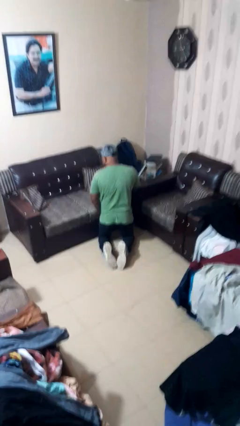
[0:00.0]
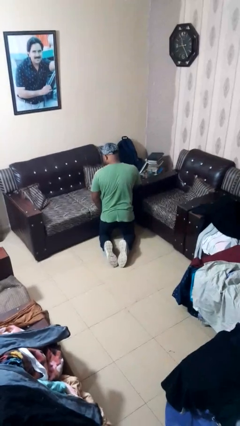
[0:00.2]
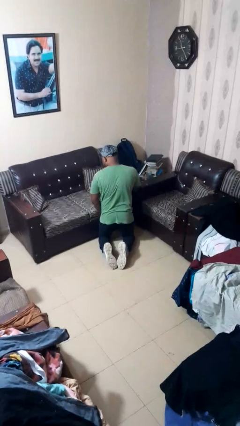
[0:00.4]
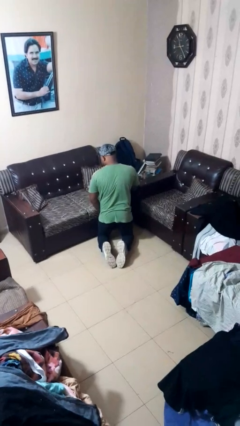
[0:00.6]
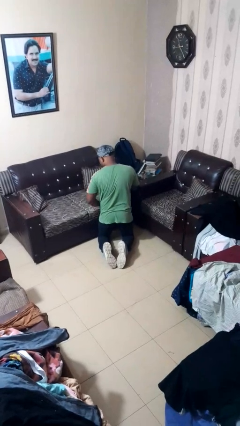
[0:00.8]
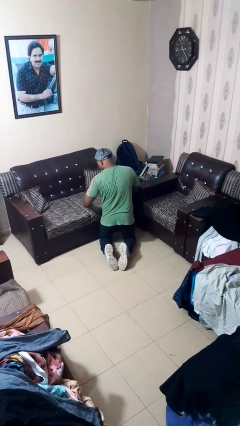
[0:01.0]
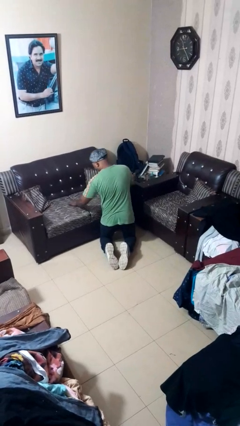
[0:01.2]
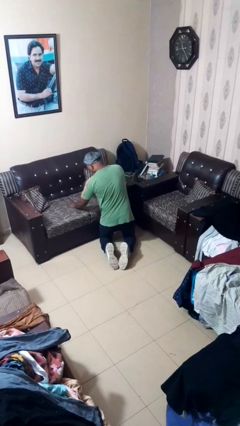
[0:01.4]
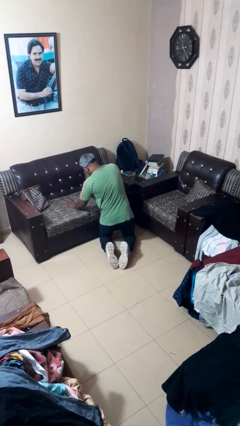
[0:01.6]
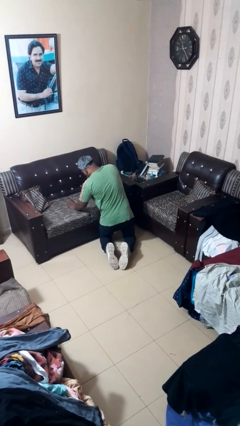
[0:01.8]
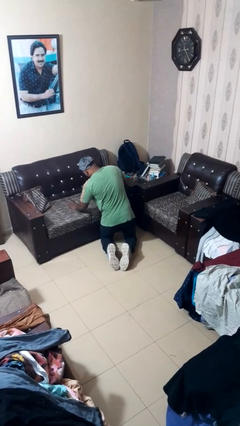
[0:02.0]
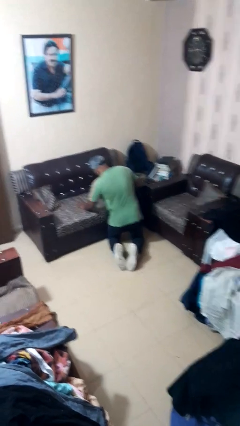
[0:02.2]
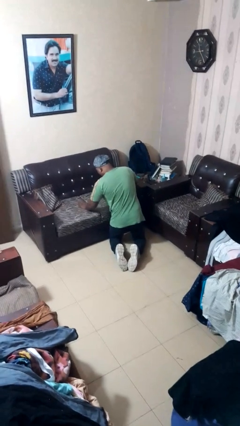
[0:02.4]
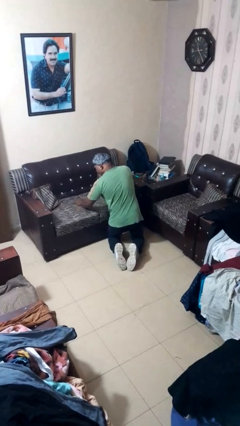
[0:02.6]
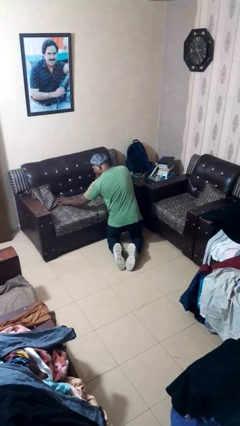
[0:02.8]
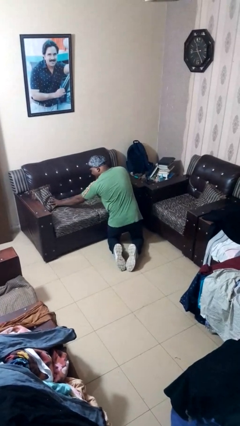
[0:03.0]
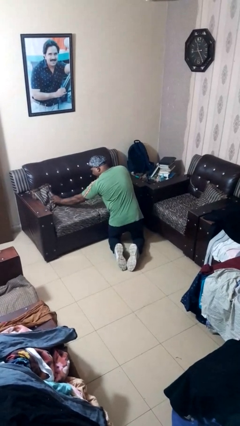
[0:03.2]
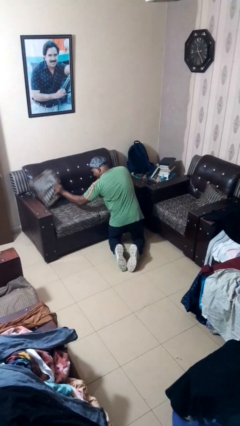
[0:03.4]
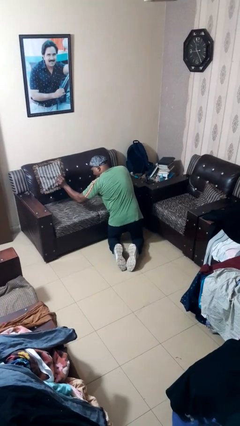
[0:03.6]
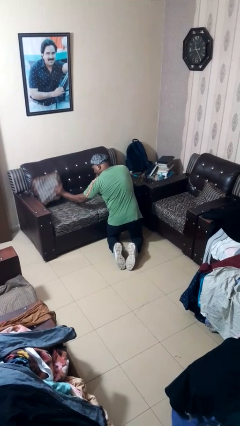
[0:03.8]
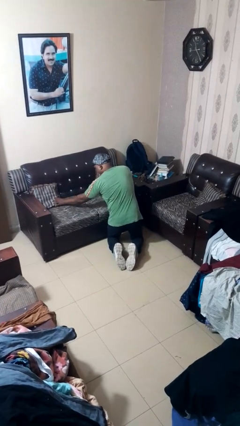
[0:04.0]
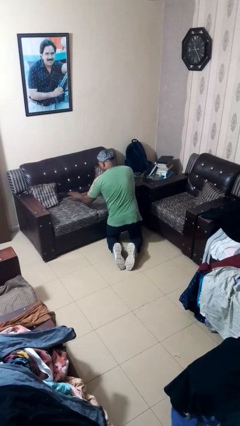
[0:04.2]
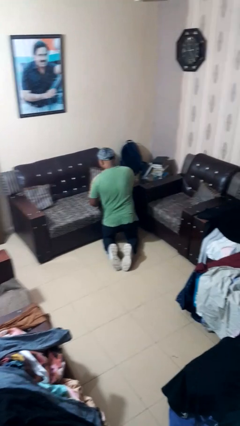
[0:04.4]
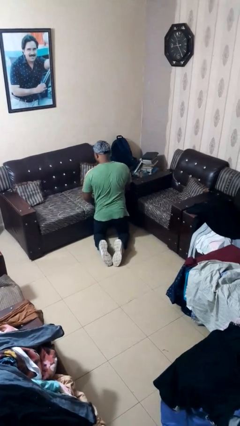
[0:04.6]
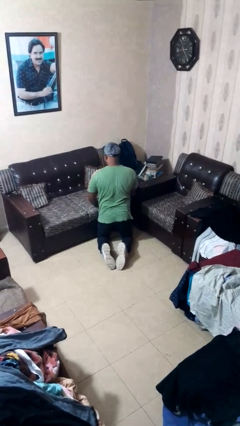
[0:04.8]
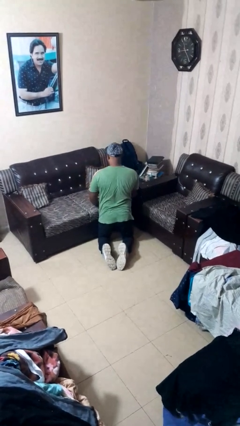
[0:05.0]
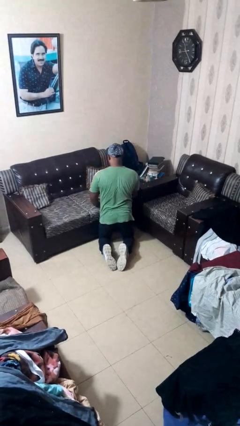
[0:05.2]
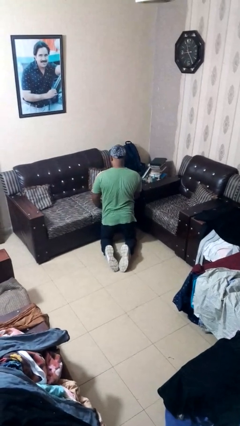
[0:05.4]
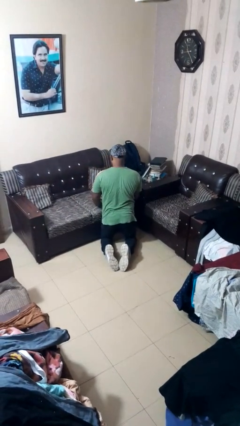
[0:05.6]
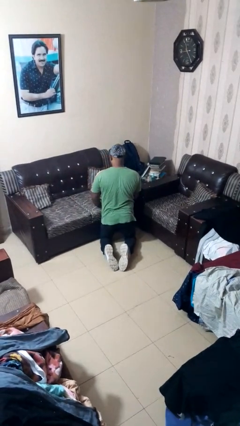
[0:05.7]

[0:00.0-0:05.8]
person searches in couch

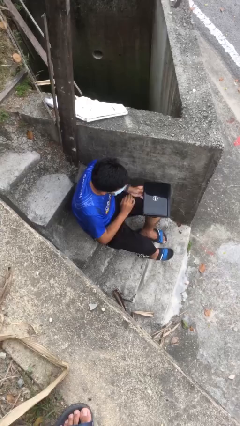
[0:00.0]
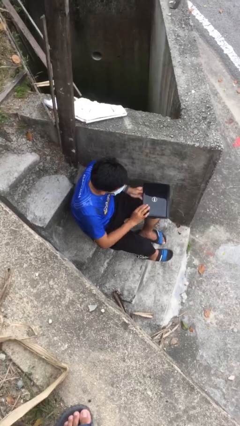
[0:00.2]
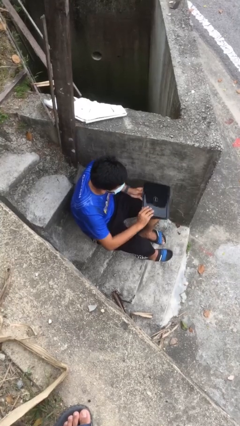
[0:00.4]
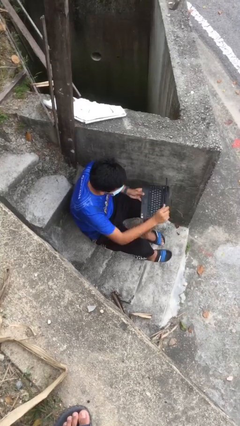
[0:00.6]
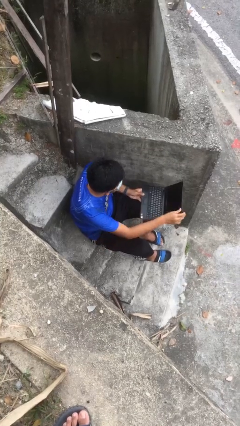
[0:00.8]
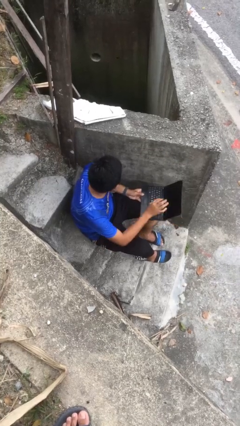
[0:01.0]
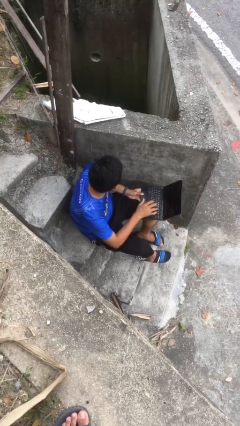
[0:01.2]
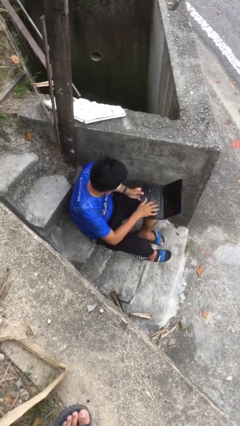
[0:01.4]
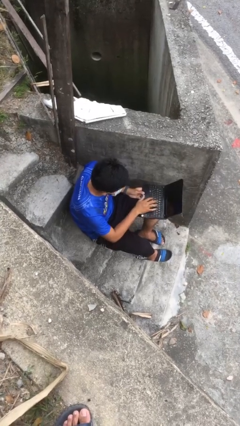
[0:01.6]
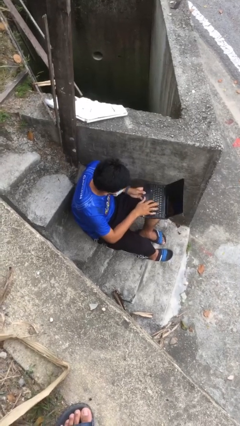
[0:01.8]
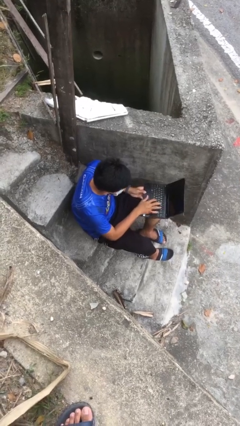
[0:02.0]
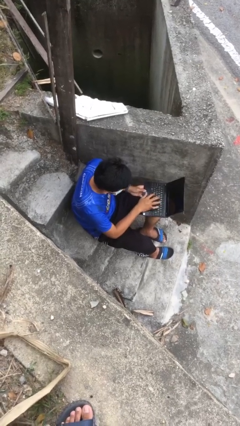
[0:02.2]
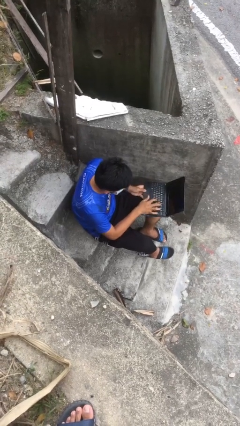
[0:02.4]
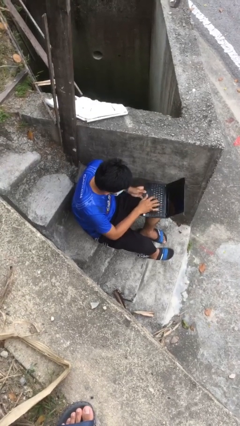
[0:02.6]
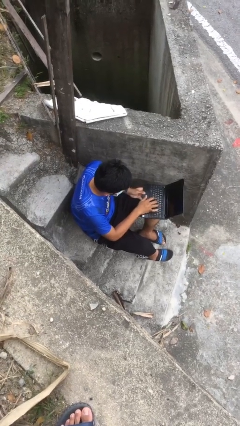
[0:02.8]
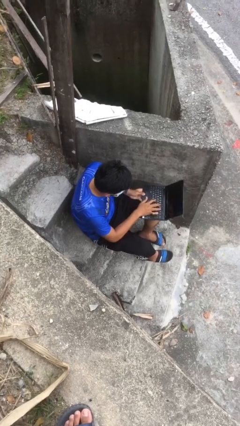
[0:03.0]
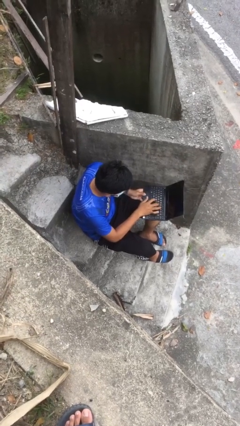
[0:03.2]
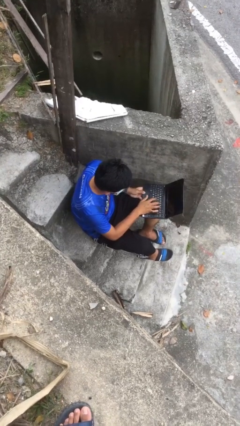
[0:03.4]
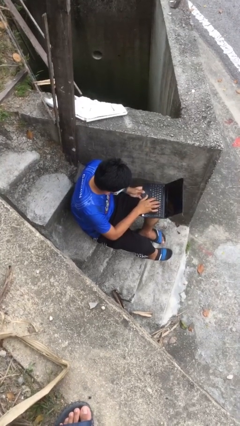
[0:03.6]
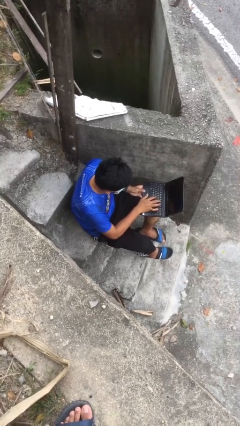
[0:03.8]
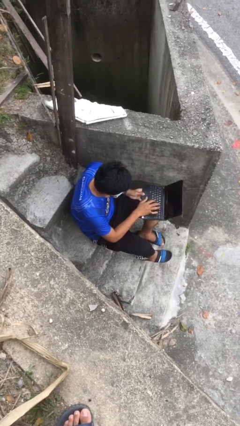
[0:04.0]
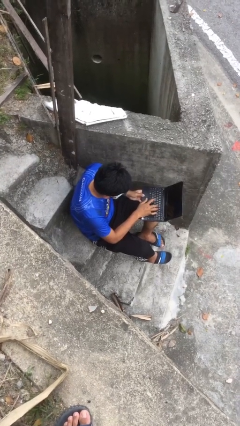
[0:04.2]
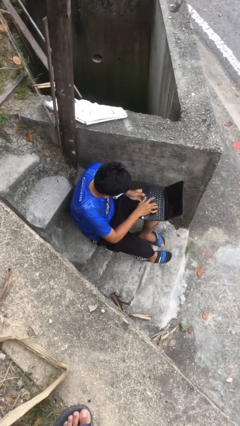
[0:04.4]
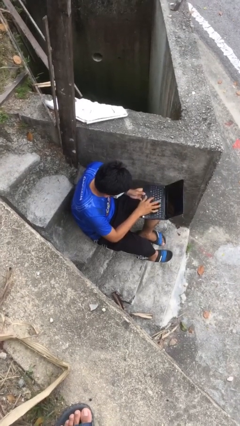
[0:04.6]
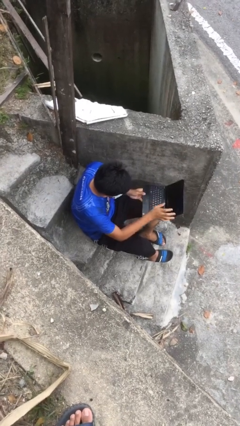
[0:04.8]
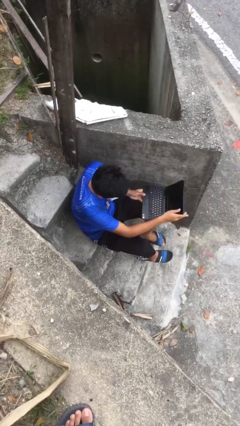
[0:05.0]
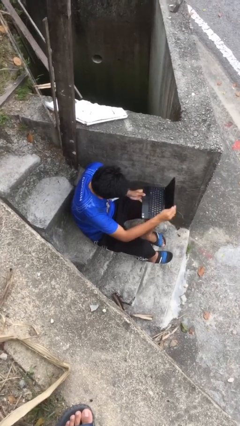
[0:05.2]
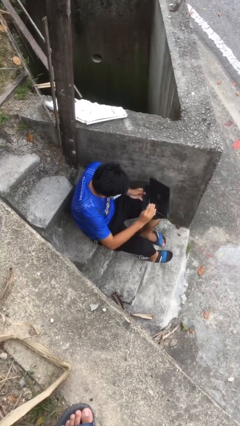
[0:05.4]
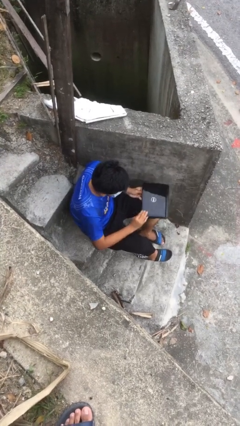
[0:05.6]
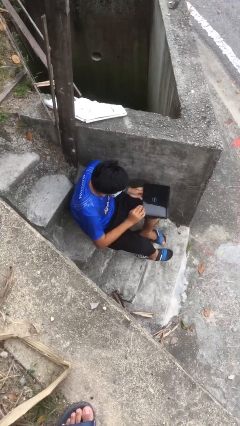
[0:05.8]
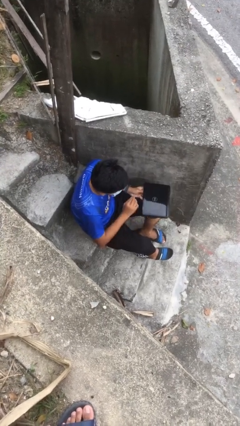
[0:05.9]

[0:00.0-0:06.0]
person interacts with laptop

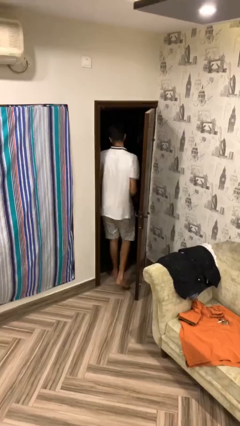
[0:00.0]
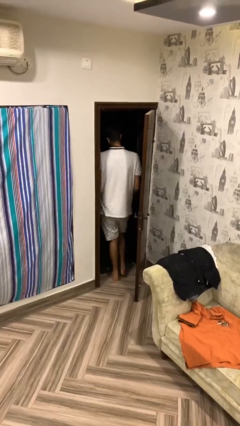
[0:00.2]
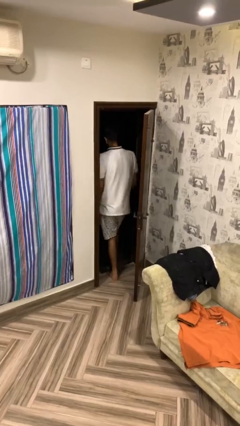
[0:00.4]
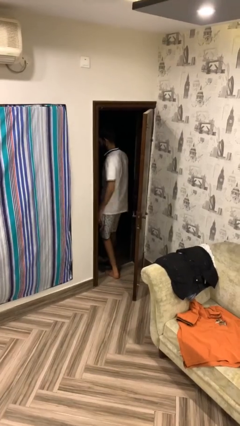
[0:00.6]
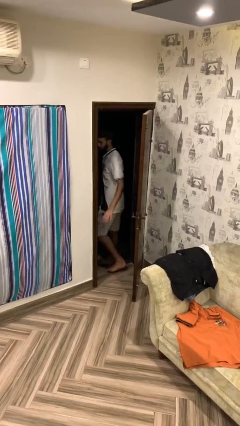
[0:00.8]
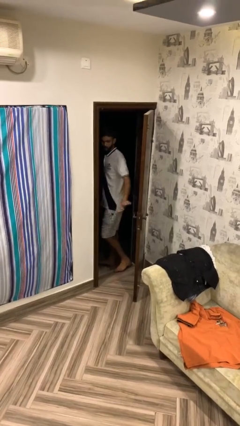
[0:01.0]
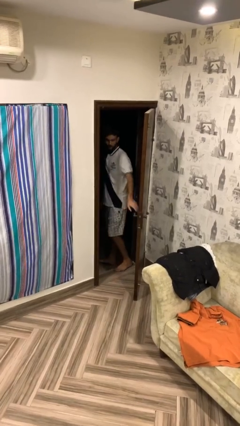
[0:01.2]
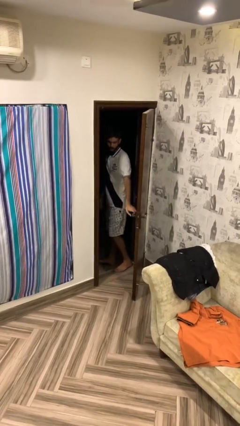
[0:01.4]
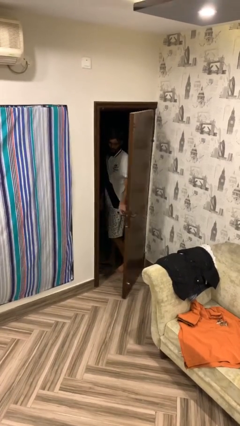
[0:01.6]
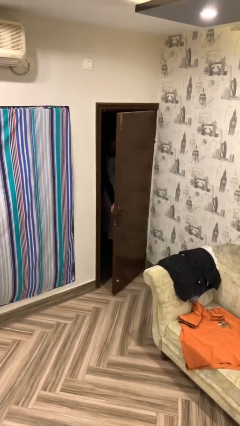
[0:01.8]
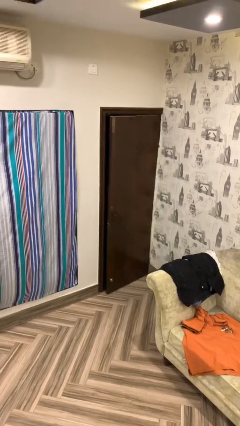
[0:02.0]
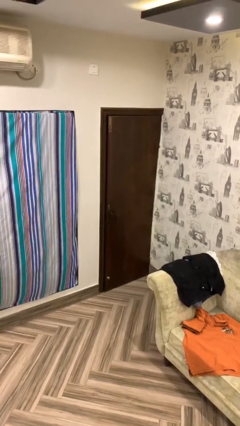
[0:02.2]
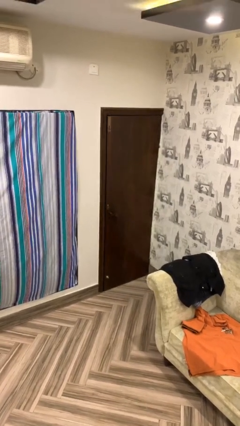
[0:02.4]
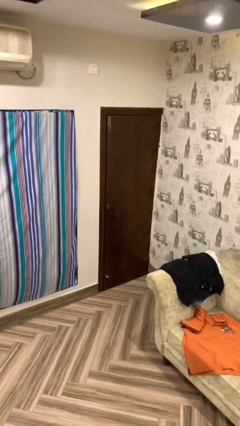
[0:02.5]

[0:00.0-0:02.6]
person closes facility door

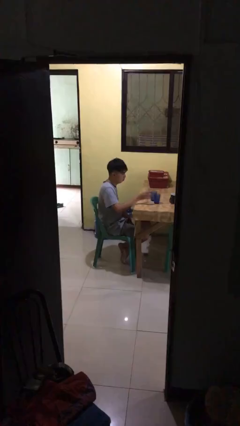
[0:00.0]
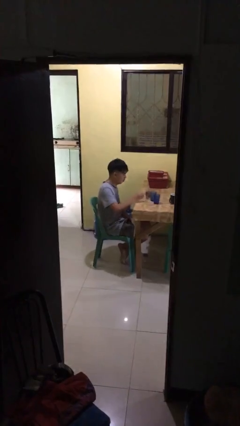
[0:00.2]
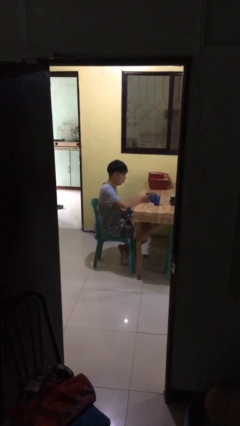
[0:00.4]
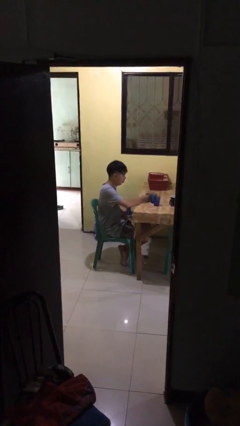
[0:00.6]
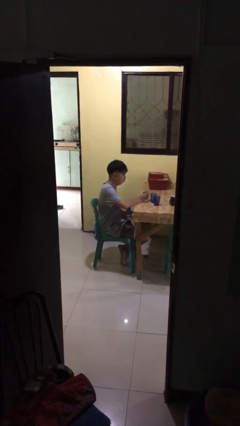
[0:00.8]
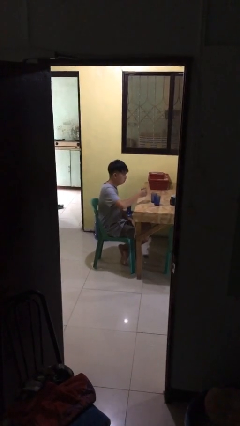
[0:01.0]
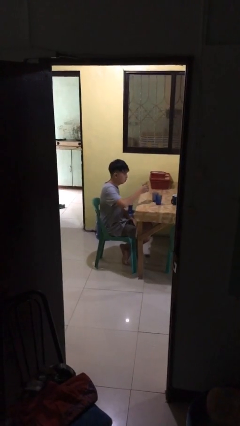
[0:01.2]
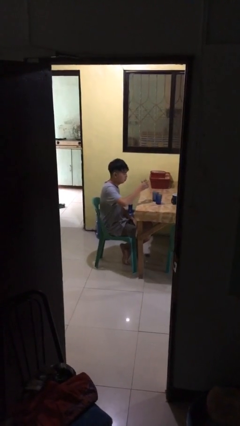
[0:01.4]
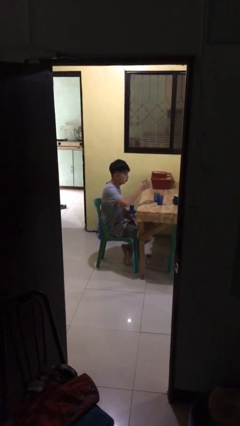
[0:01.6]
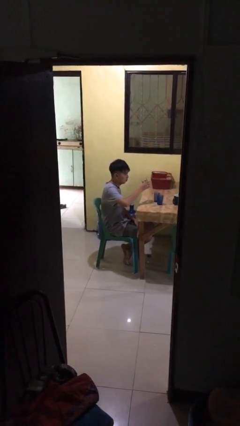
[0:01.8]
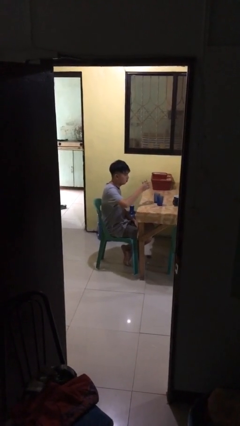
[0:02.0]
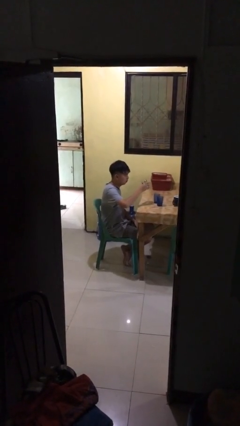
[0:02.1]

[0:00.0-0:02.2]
person picks up object from table

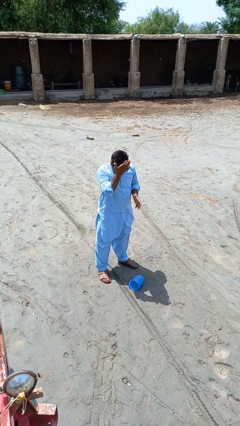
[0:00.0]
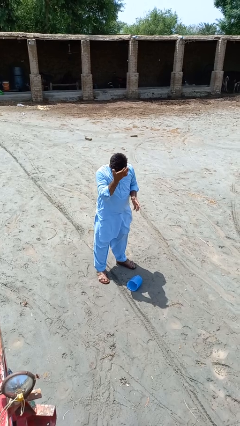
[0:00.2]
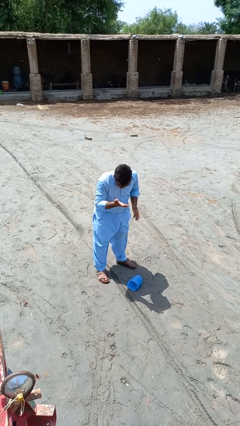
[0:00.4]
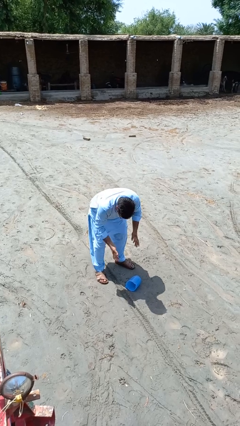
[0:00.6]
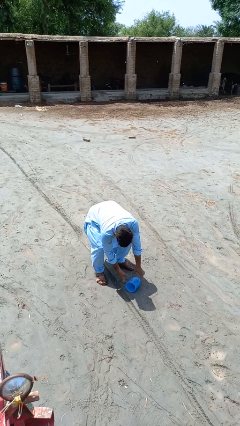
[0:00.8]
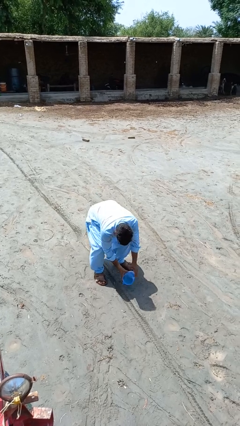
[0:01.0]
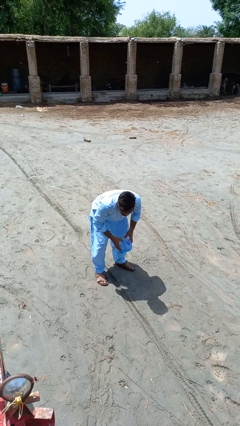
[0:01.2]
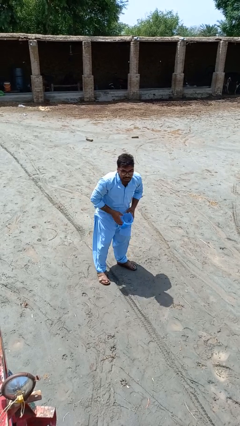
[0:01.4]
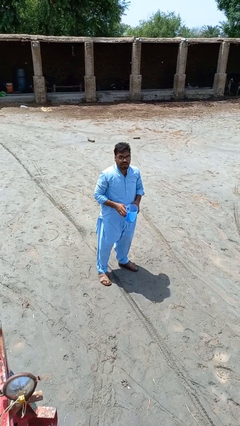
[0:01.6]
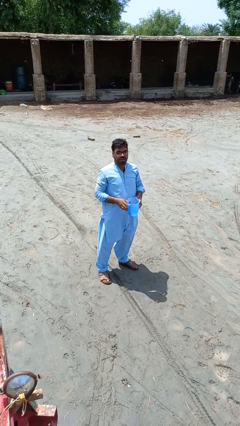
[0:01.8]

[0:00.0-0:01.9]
person picks up object from floor
